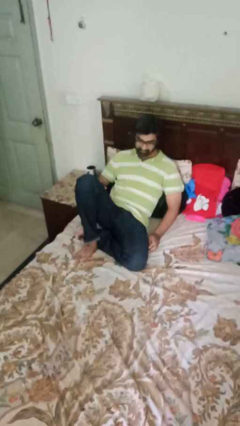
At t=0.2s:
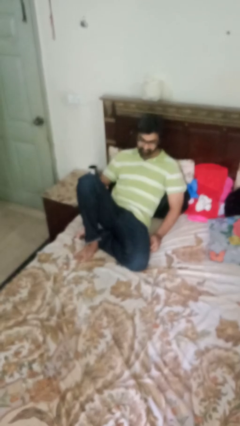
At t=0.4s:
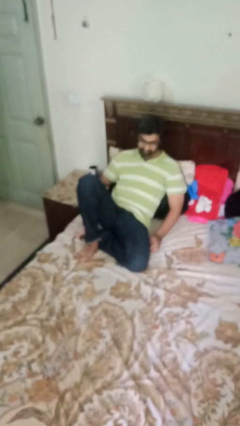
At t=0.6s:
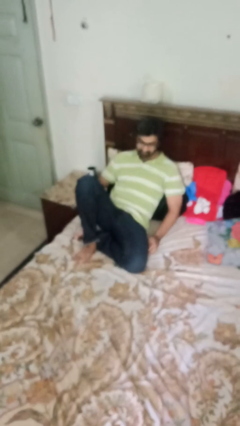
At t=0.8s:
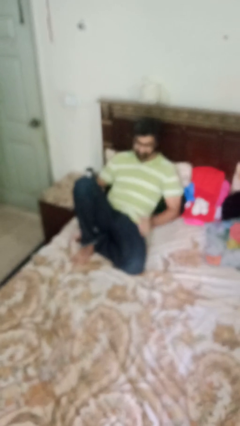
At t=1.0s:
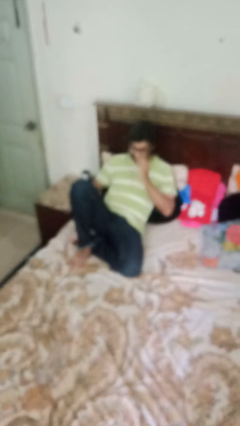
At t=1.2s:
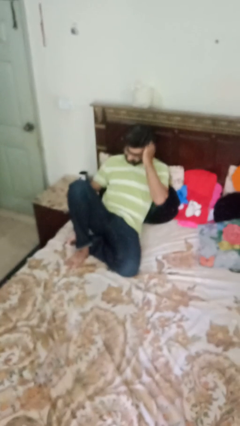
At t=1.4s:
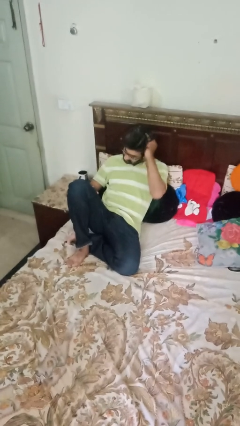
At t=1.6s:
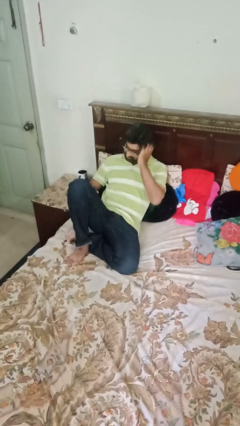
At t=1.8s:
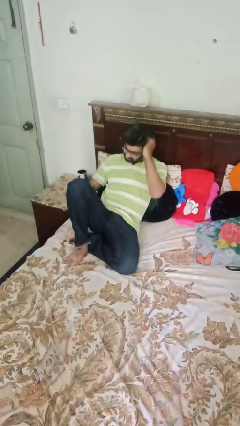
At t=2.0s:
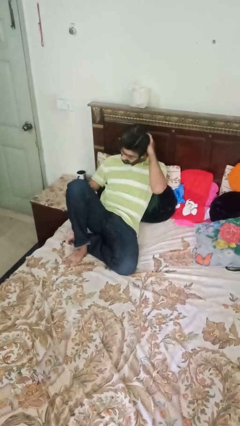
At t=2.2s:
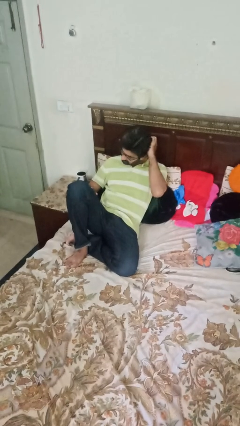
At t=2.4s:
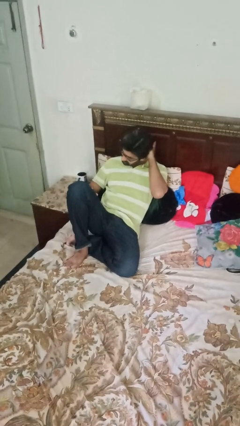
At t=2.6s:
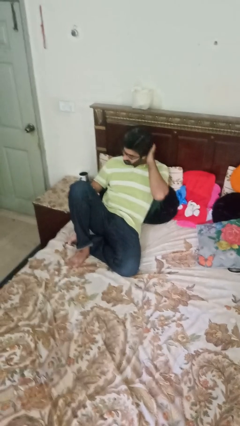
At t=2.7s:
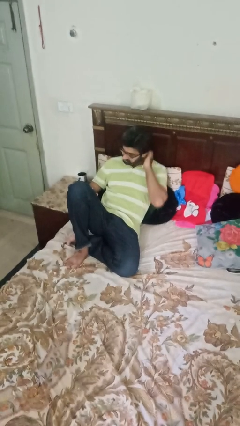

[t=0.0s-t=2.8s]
person strokes hair

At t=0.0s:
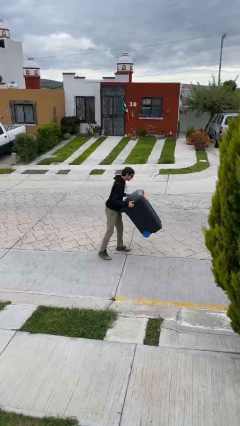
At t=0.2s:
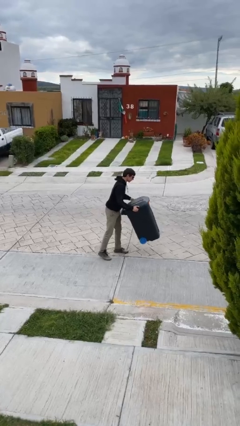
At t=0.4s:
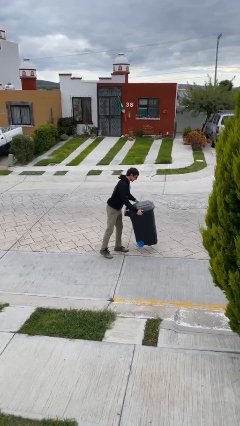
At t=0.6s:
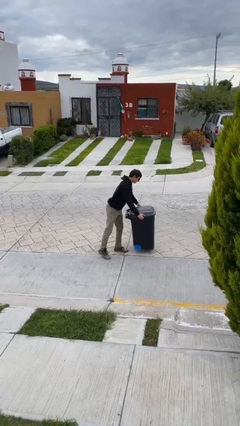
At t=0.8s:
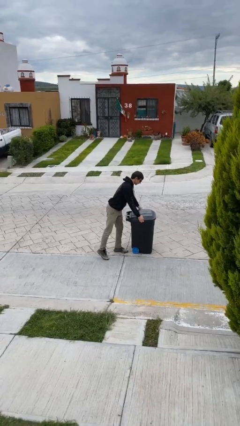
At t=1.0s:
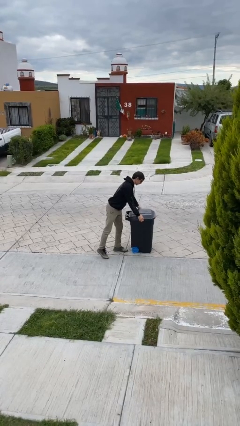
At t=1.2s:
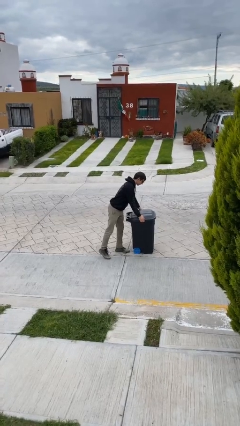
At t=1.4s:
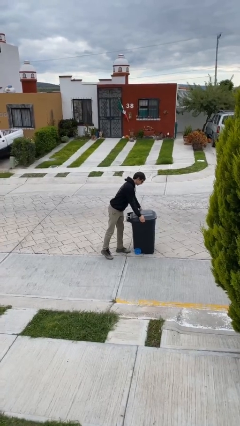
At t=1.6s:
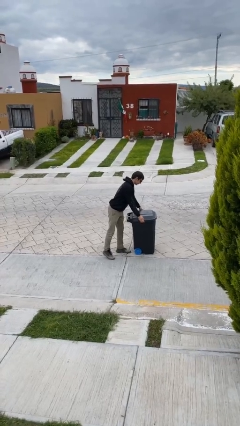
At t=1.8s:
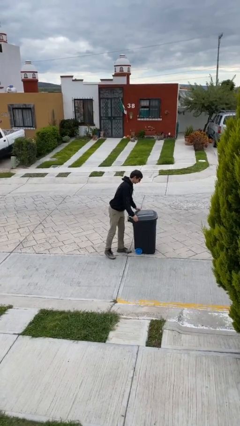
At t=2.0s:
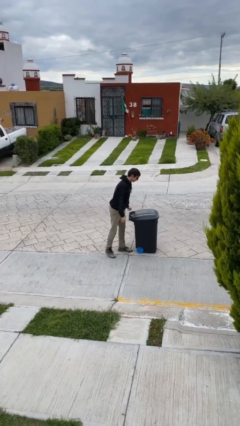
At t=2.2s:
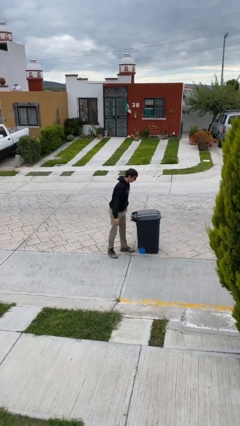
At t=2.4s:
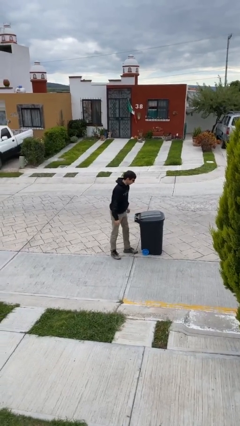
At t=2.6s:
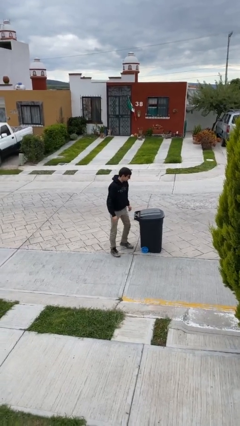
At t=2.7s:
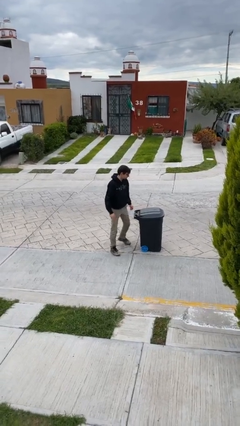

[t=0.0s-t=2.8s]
person puts down object on floor

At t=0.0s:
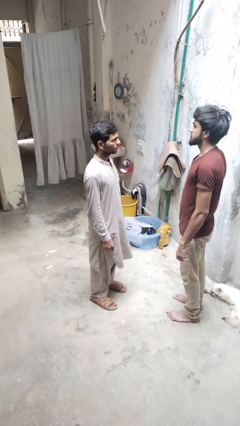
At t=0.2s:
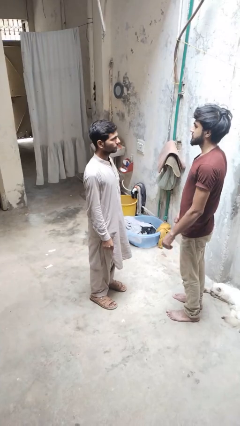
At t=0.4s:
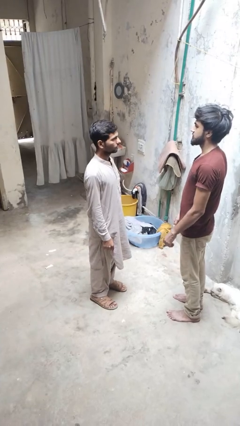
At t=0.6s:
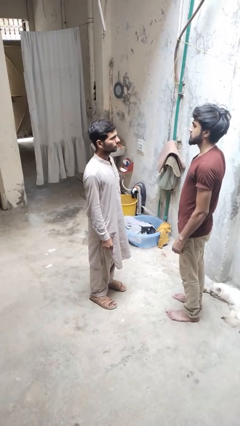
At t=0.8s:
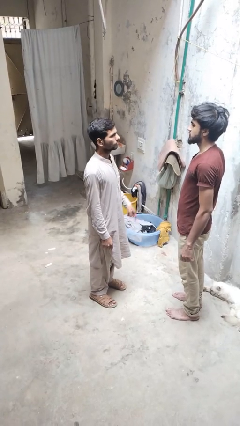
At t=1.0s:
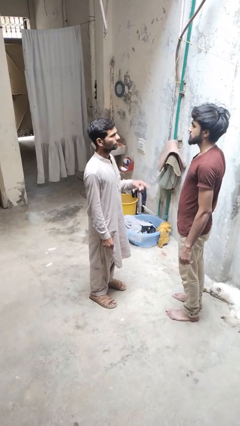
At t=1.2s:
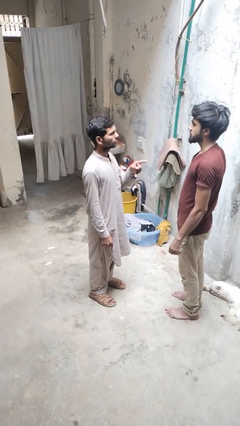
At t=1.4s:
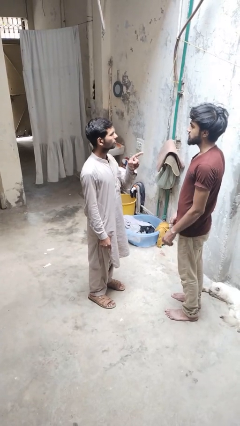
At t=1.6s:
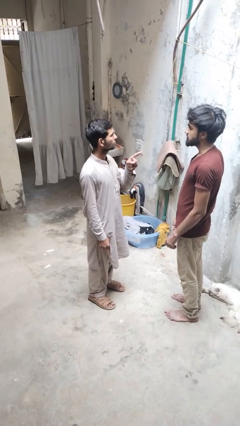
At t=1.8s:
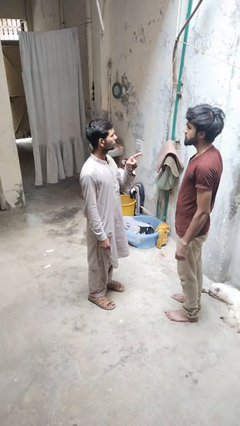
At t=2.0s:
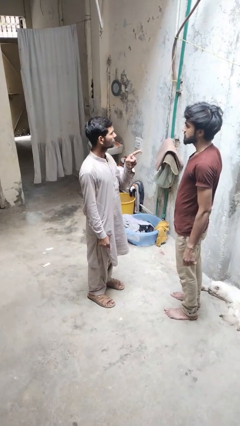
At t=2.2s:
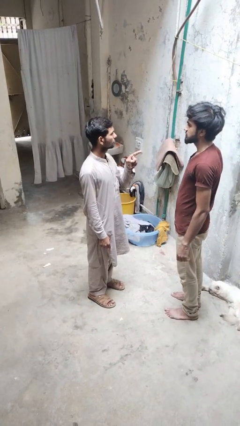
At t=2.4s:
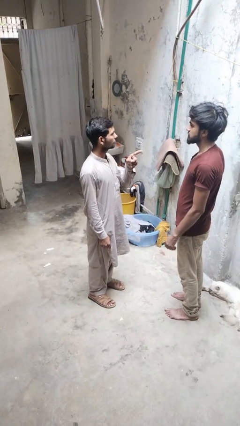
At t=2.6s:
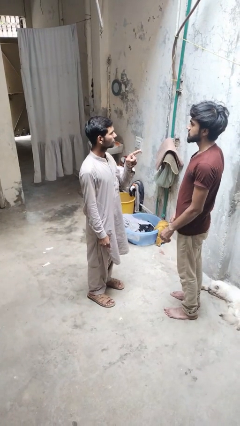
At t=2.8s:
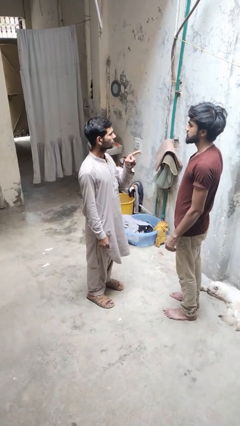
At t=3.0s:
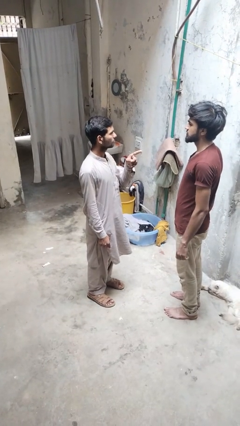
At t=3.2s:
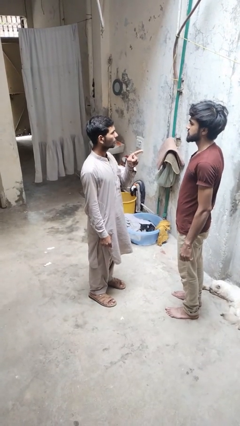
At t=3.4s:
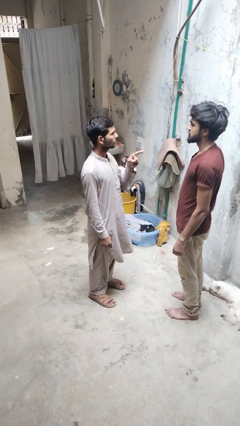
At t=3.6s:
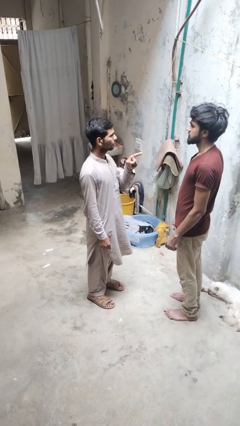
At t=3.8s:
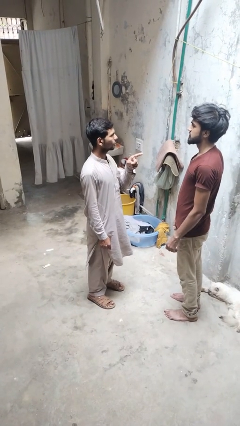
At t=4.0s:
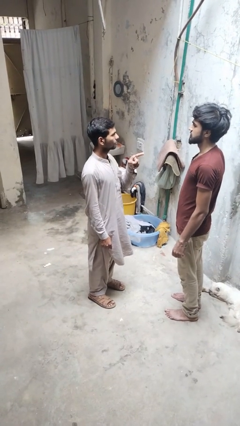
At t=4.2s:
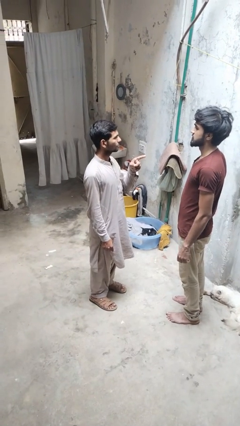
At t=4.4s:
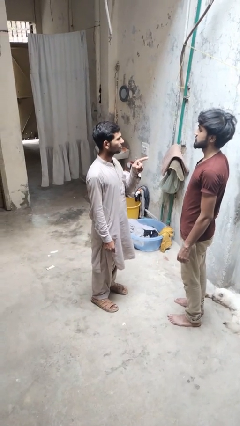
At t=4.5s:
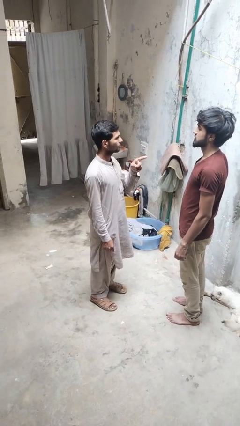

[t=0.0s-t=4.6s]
person points at person

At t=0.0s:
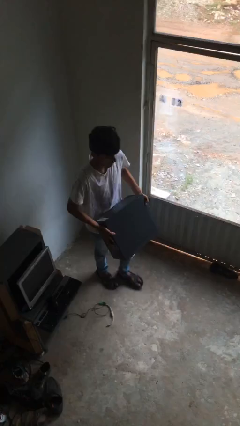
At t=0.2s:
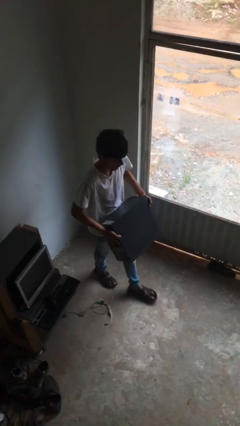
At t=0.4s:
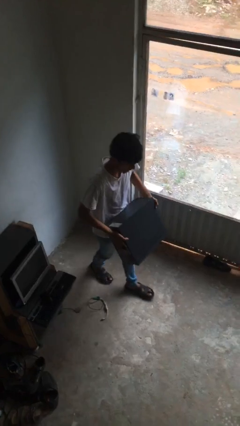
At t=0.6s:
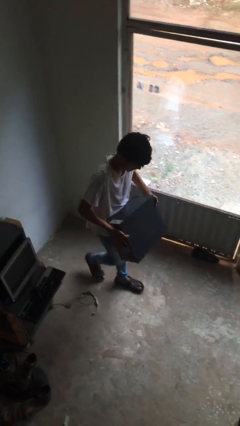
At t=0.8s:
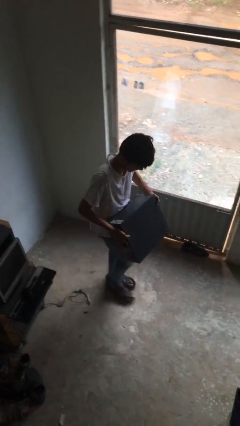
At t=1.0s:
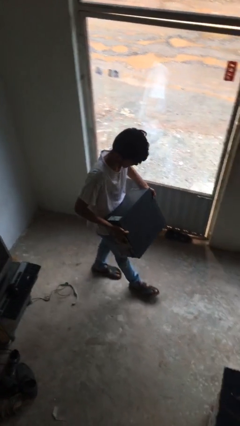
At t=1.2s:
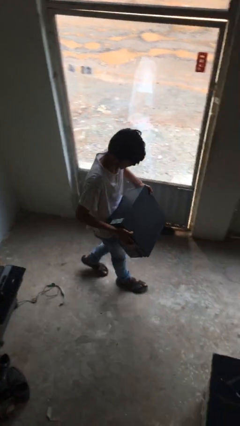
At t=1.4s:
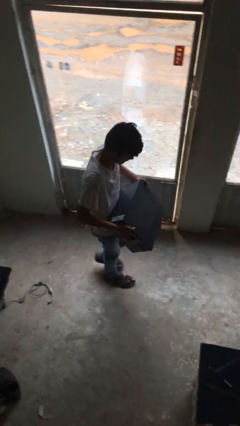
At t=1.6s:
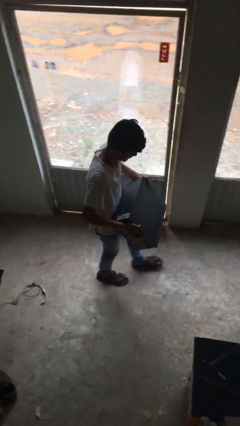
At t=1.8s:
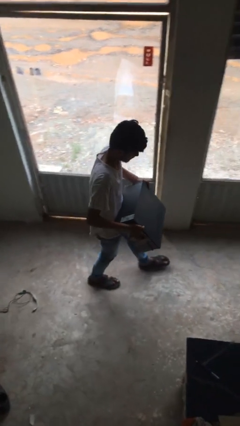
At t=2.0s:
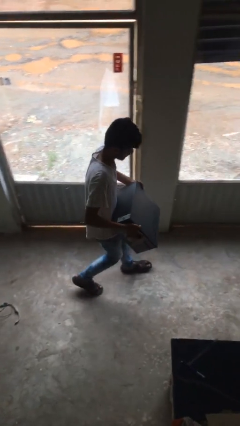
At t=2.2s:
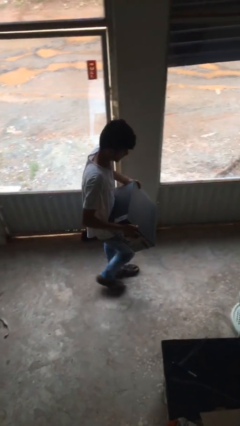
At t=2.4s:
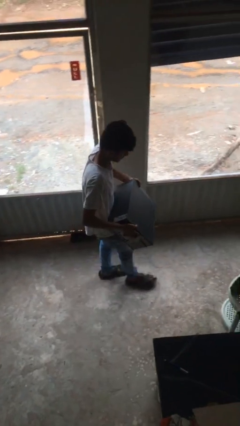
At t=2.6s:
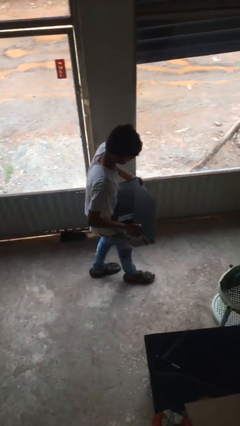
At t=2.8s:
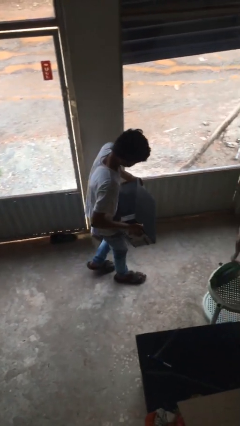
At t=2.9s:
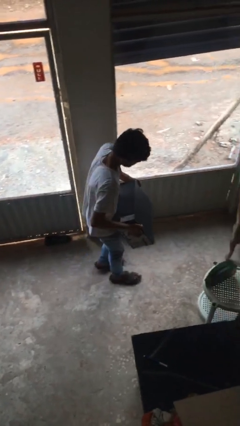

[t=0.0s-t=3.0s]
person carries heavy object

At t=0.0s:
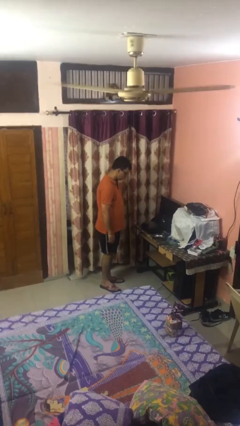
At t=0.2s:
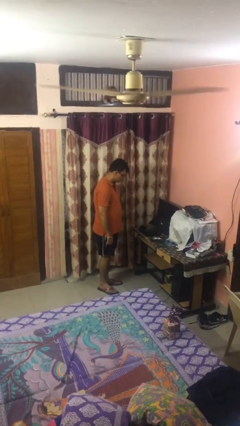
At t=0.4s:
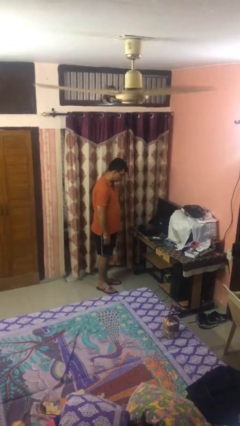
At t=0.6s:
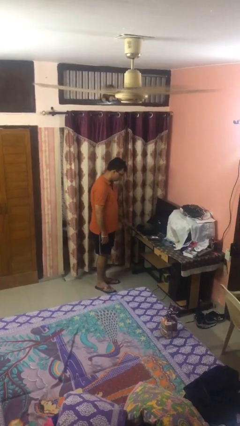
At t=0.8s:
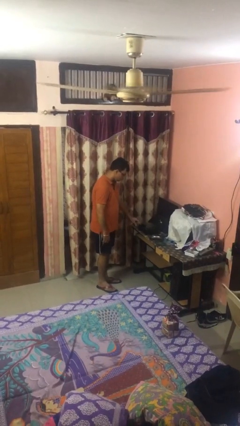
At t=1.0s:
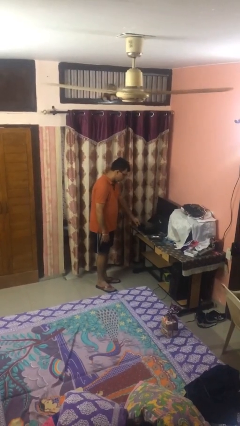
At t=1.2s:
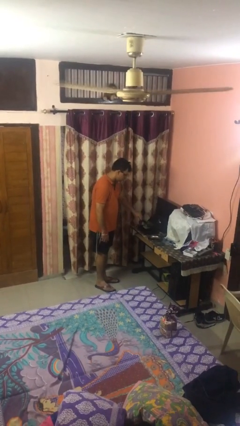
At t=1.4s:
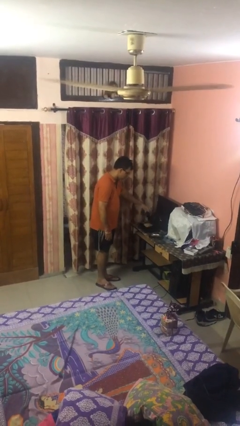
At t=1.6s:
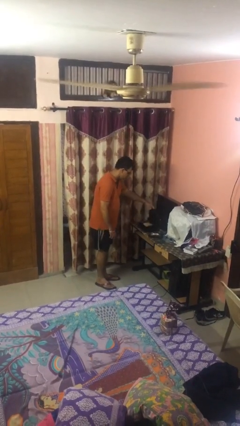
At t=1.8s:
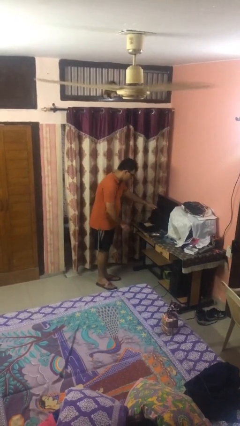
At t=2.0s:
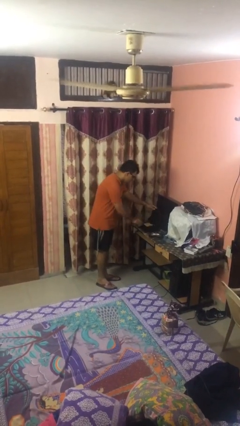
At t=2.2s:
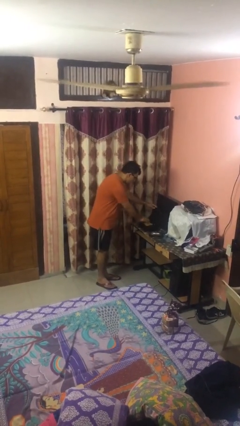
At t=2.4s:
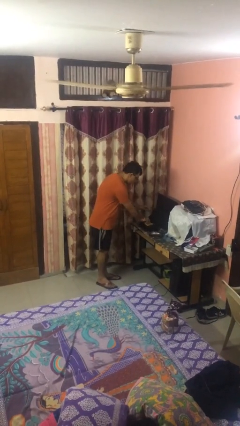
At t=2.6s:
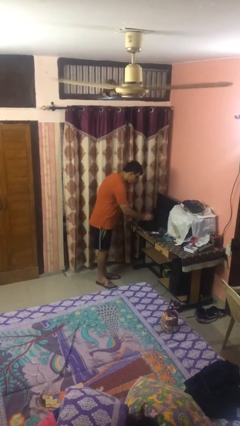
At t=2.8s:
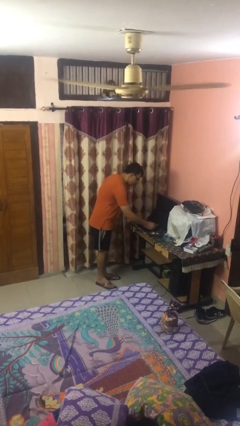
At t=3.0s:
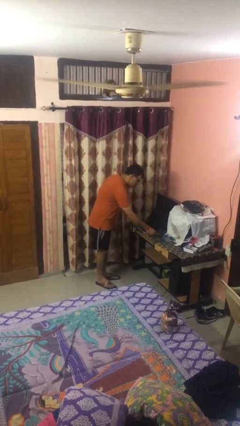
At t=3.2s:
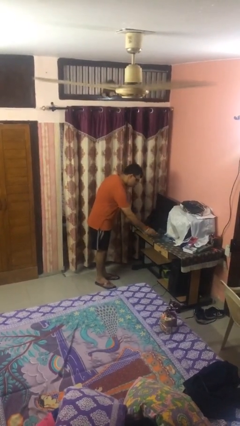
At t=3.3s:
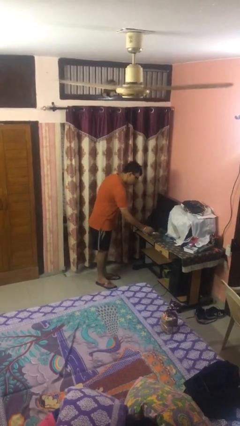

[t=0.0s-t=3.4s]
person takes object from toaster

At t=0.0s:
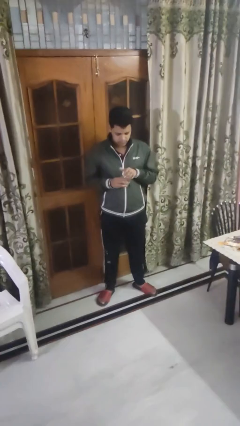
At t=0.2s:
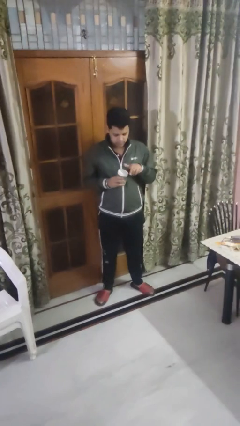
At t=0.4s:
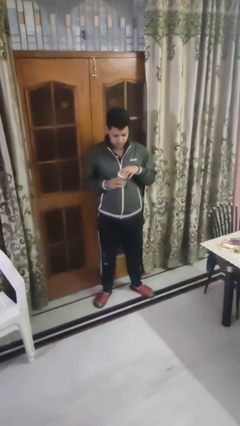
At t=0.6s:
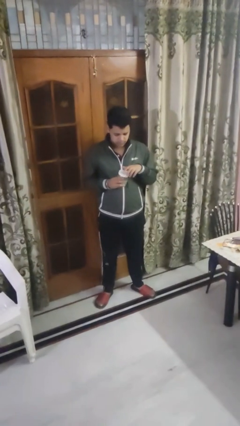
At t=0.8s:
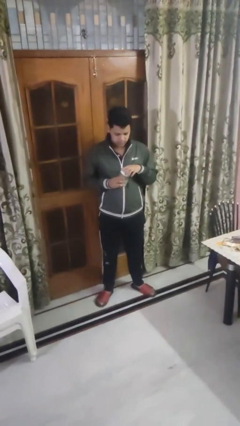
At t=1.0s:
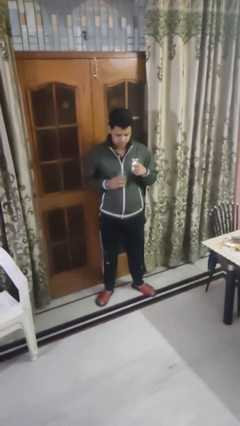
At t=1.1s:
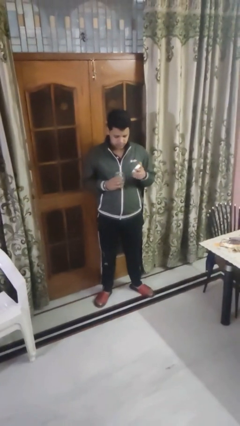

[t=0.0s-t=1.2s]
person opens jar
